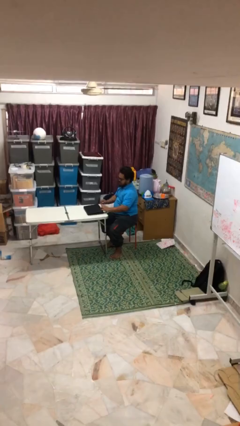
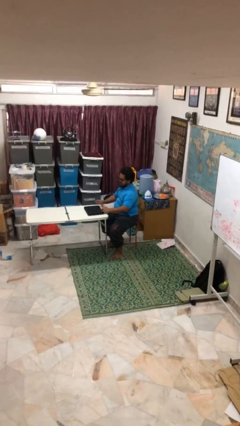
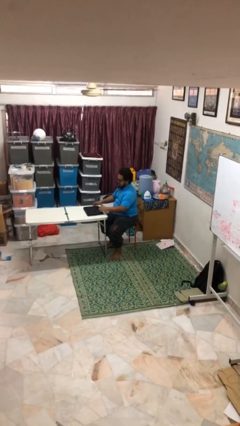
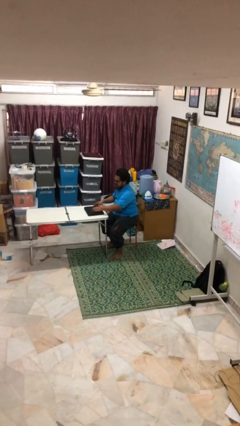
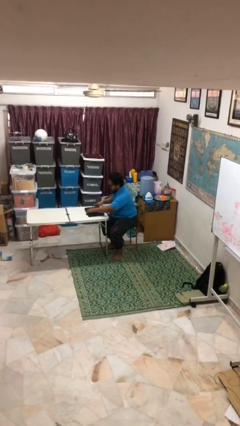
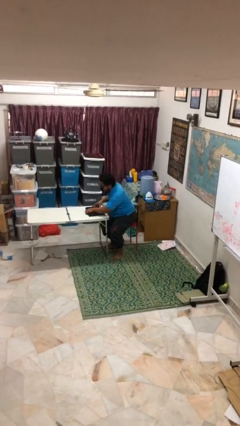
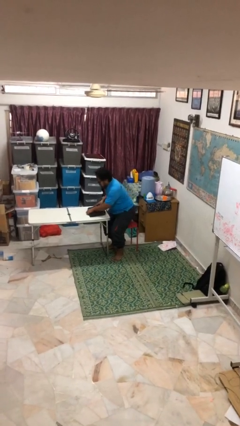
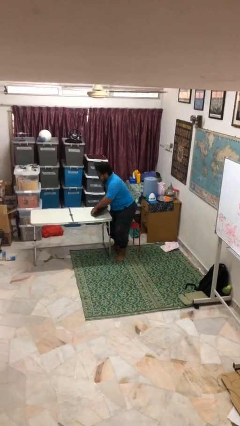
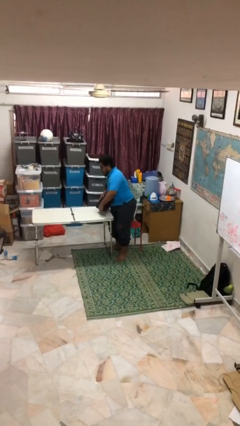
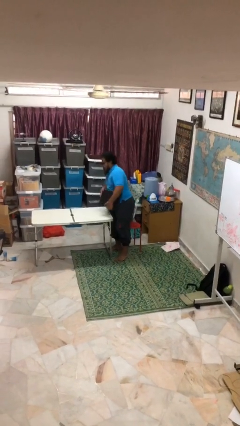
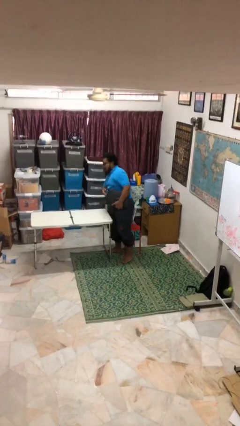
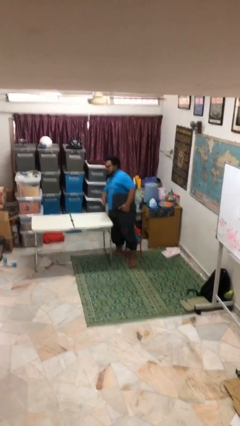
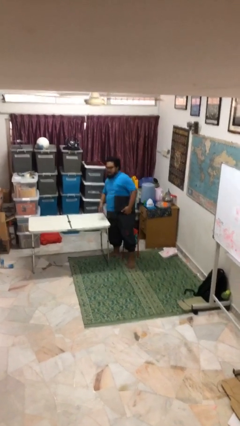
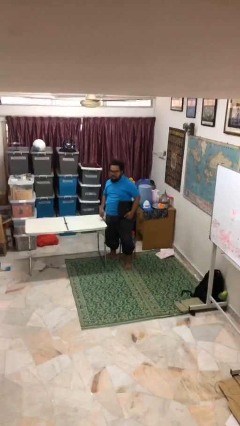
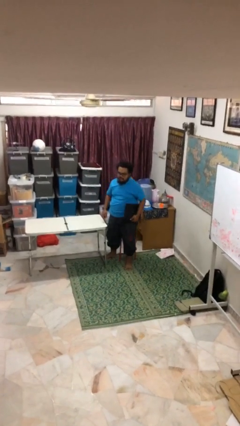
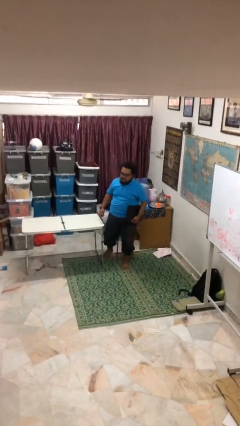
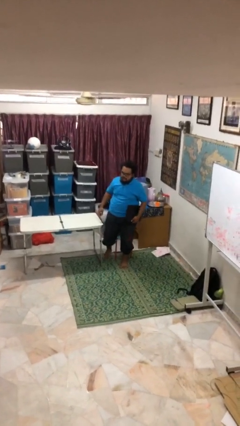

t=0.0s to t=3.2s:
person stands up

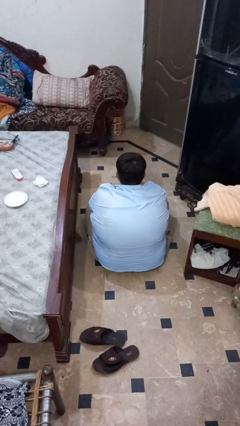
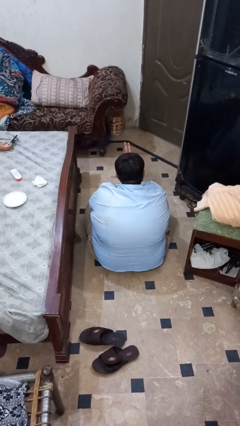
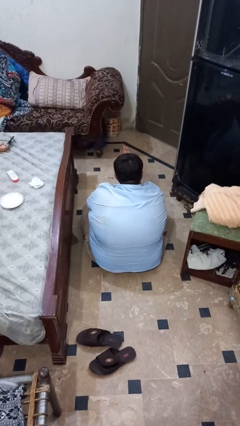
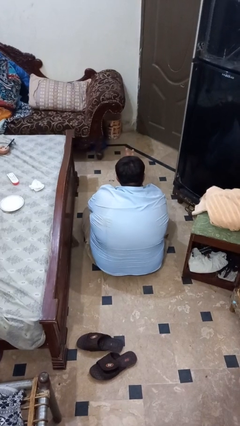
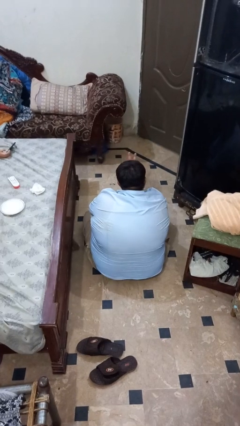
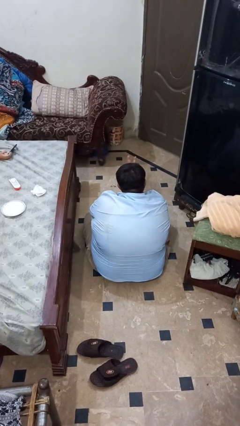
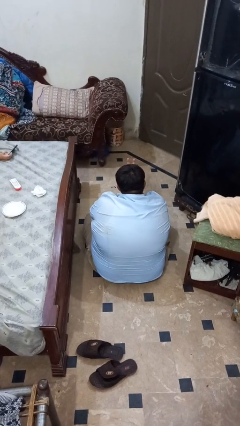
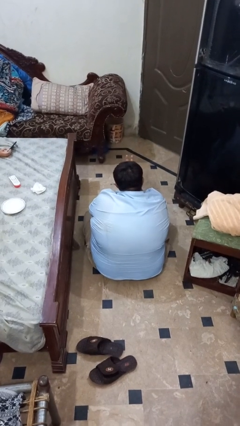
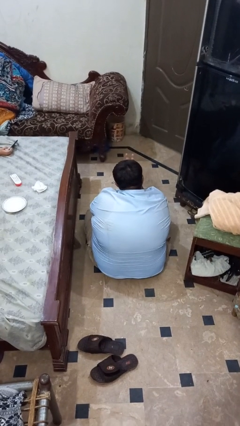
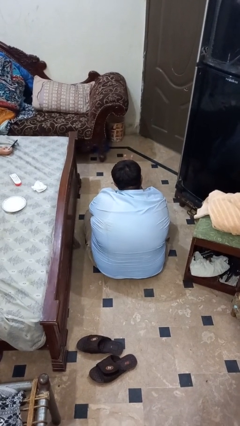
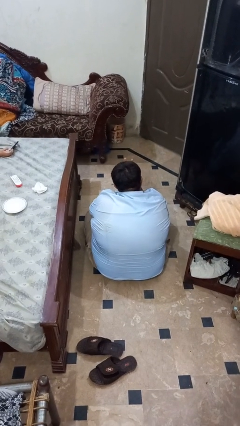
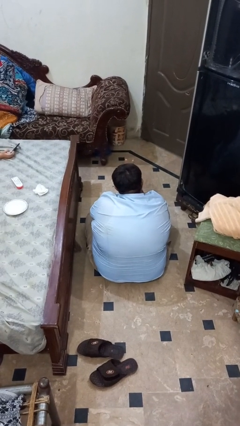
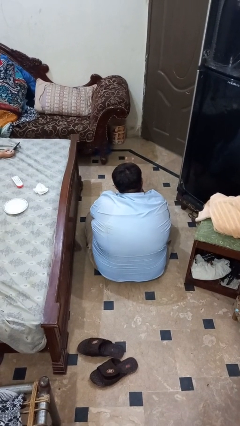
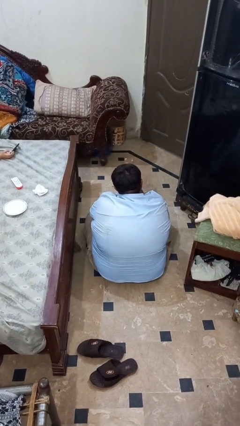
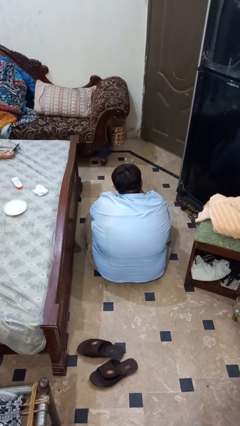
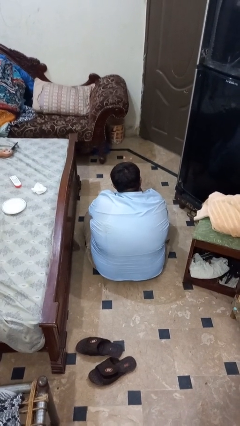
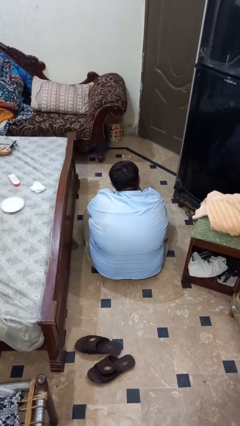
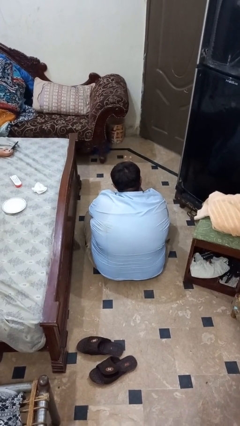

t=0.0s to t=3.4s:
person gestures watch closely

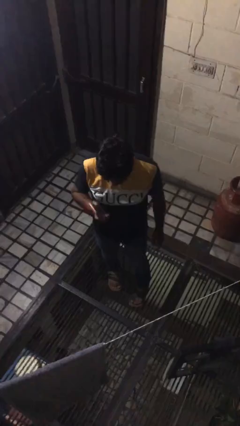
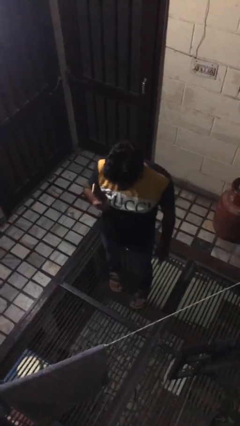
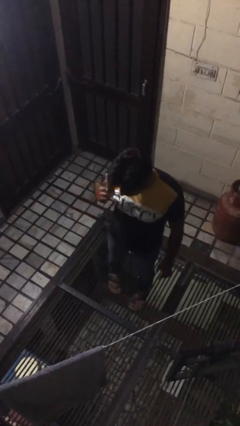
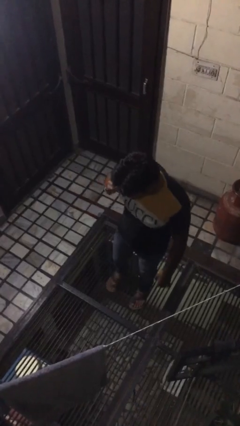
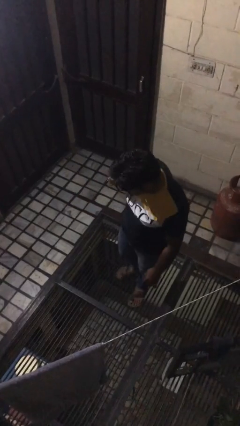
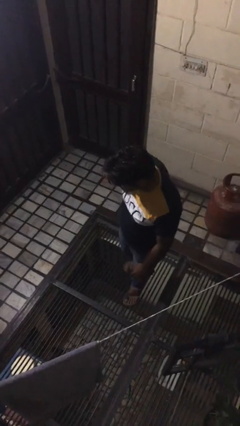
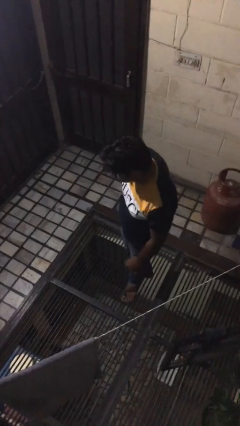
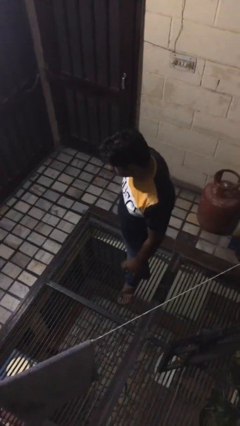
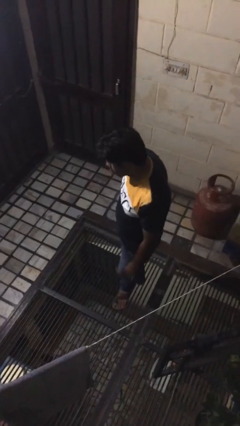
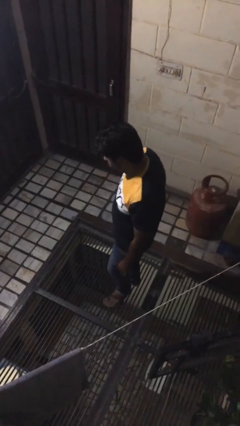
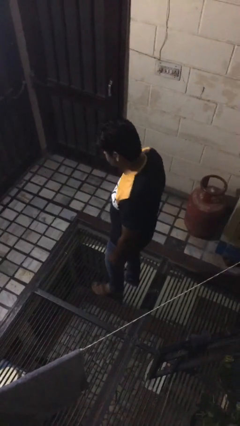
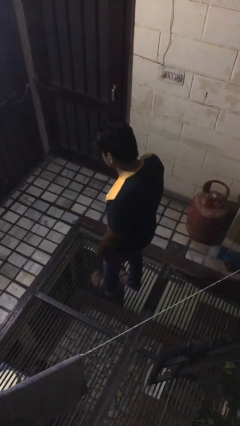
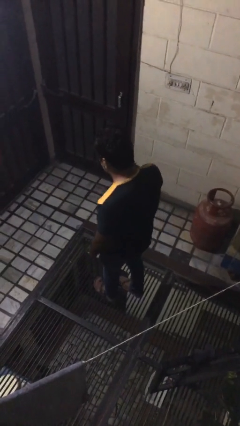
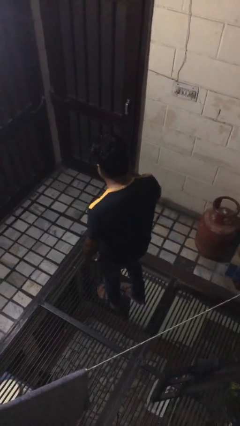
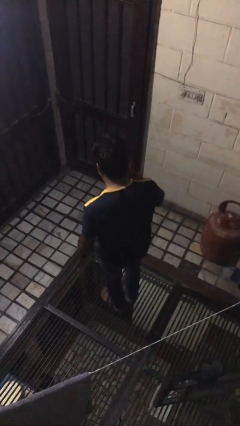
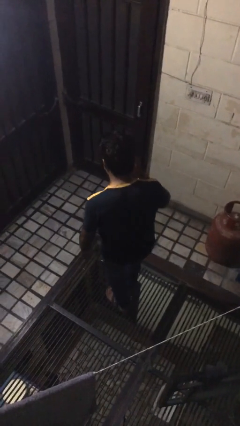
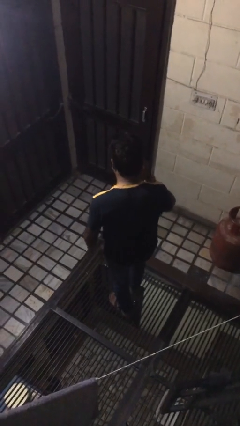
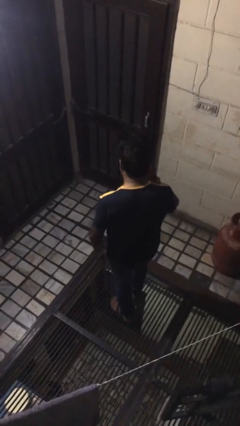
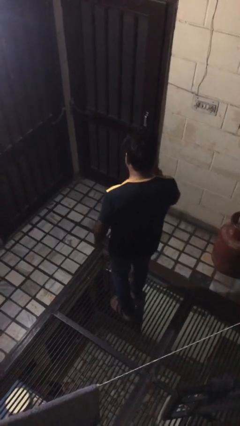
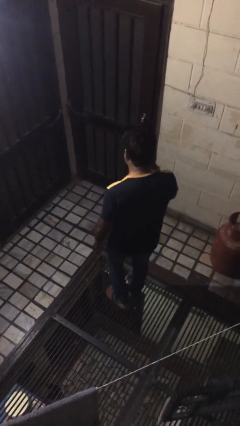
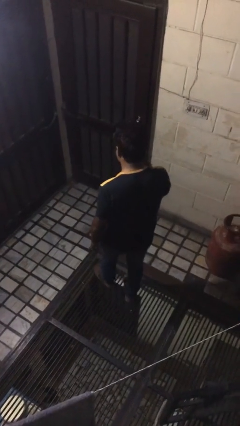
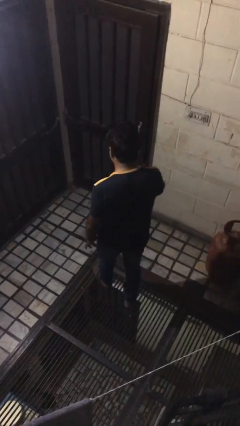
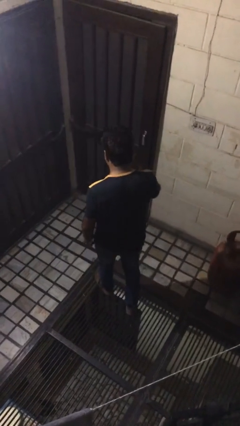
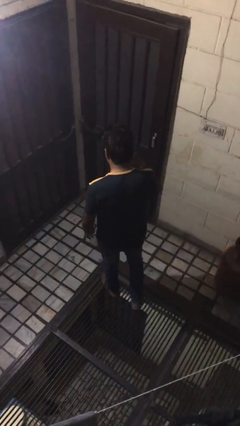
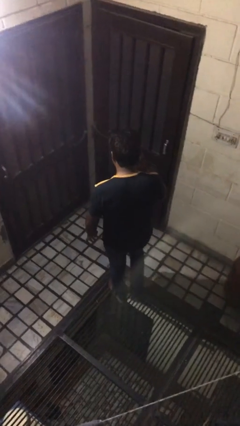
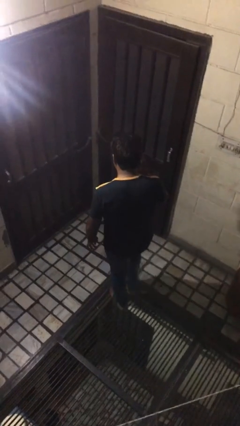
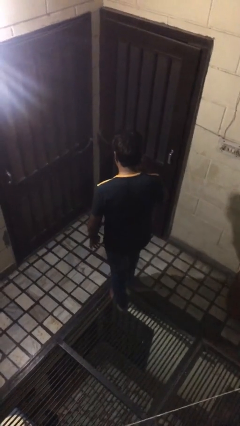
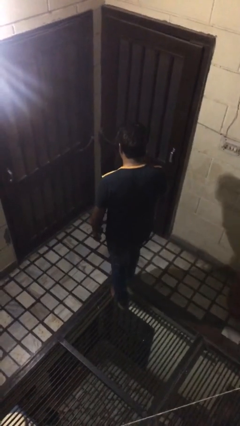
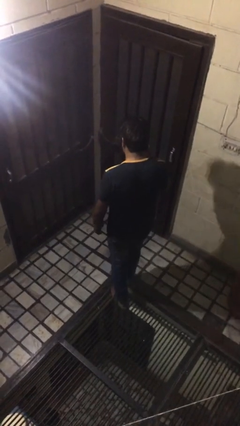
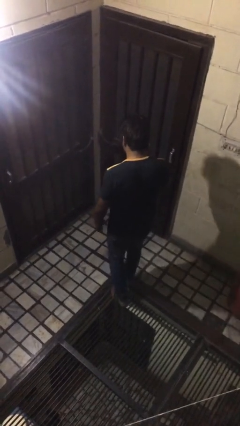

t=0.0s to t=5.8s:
person talks on phone

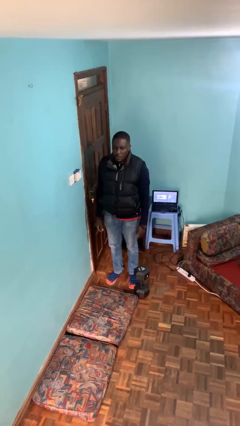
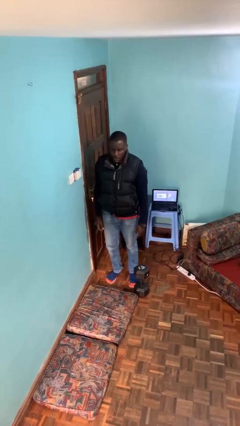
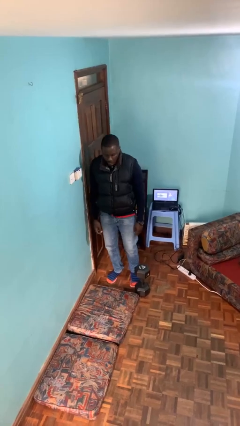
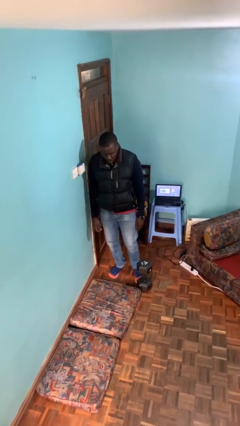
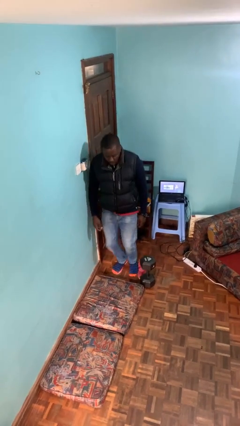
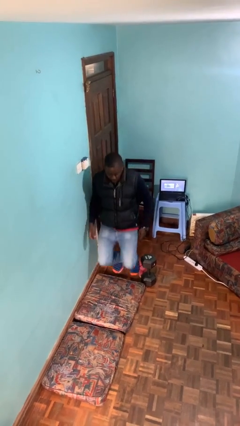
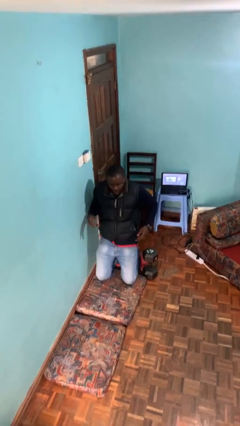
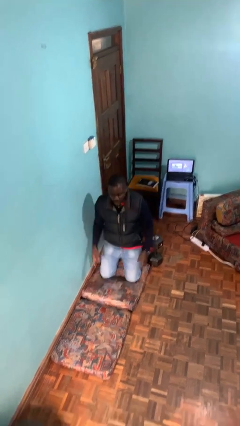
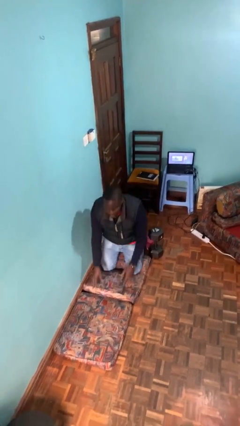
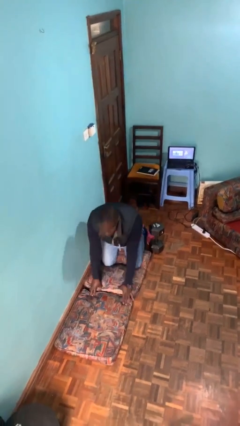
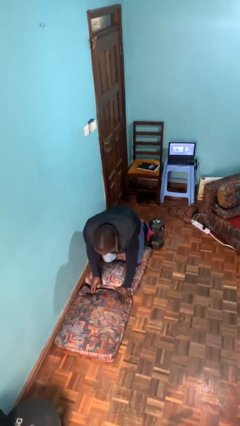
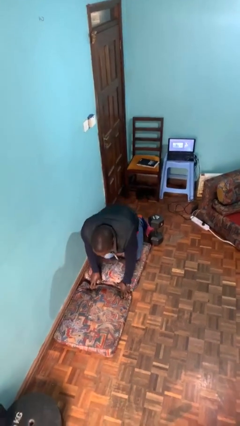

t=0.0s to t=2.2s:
person trips on object on floor

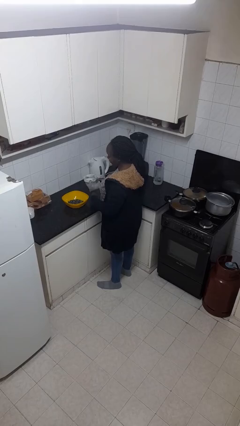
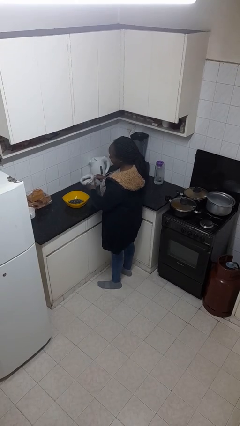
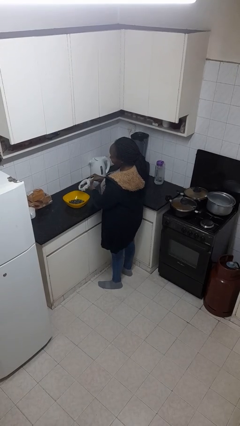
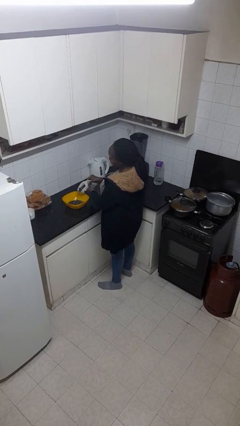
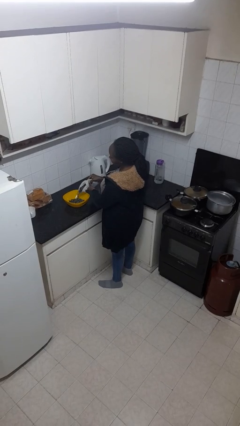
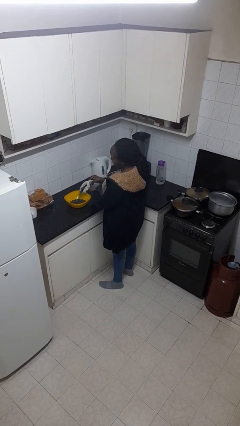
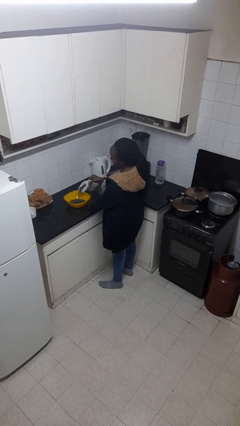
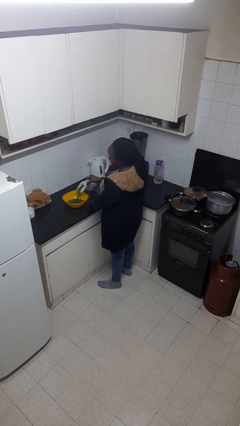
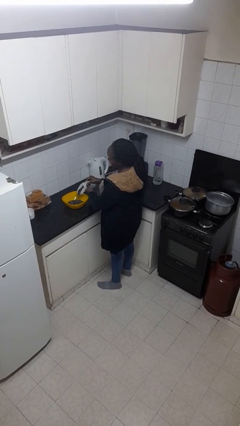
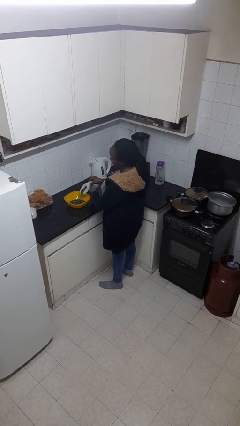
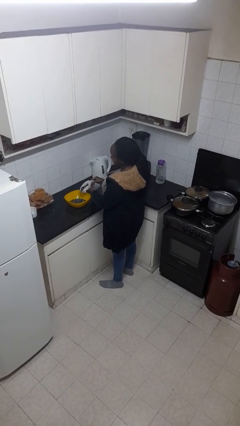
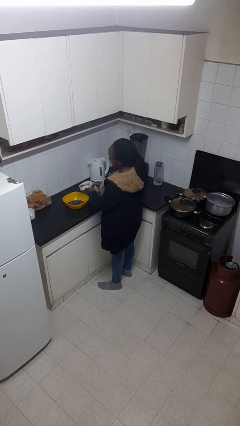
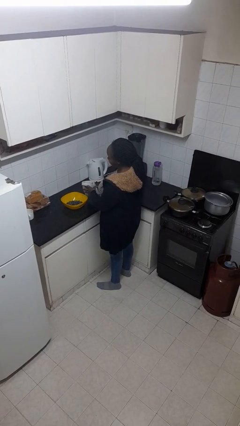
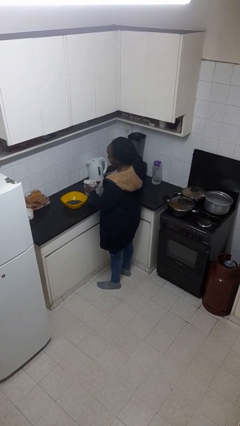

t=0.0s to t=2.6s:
person pours into bowl

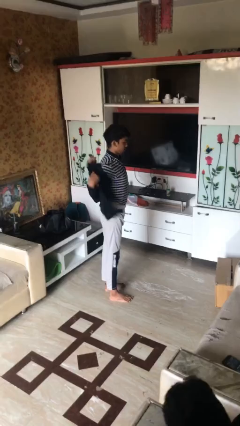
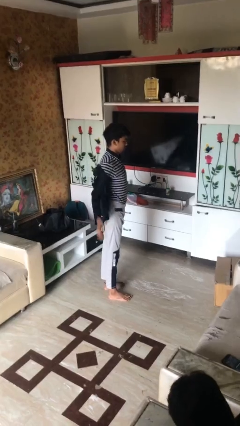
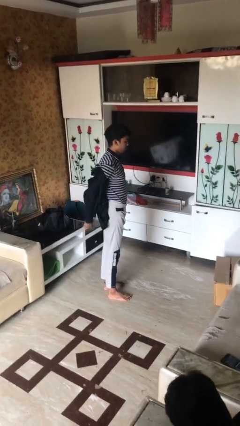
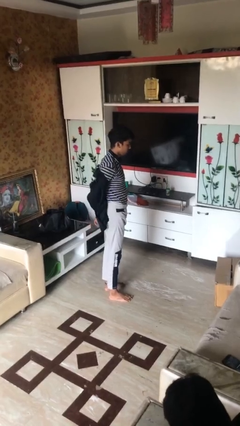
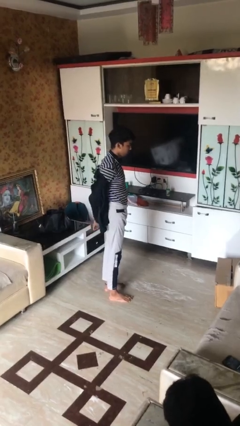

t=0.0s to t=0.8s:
person takes off jacket
